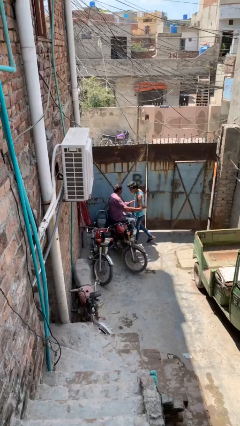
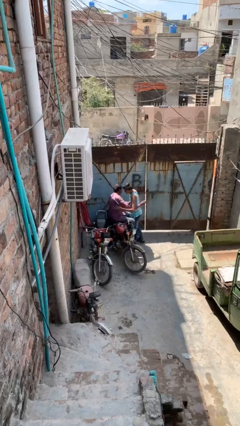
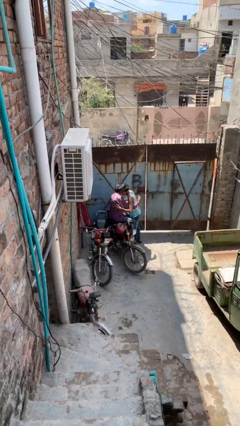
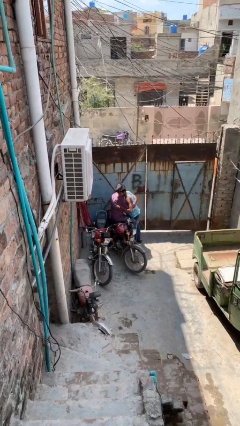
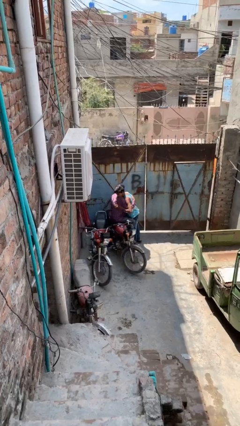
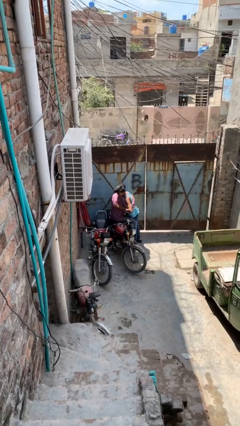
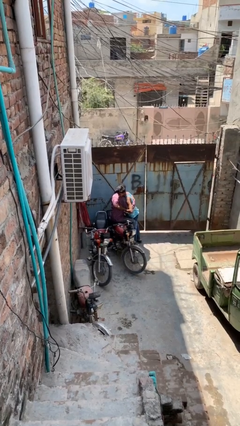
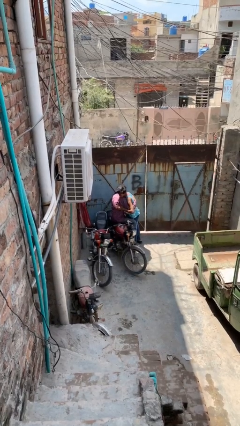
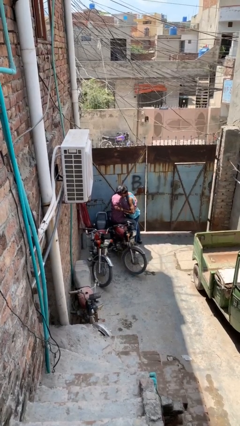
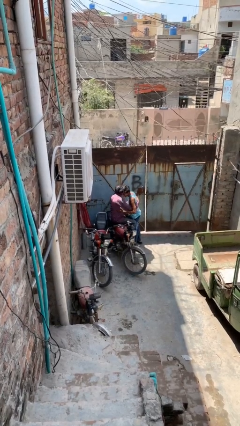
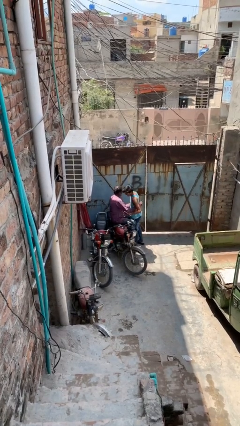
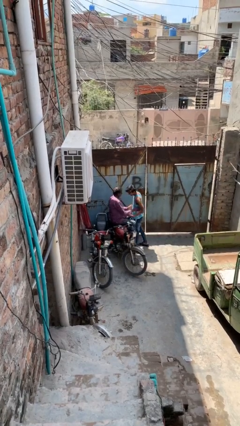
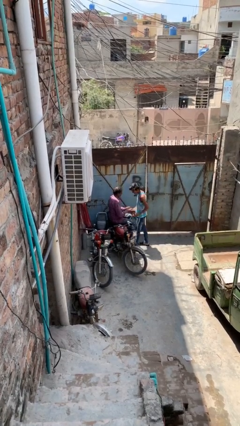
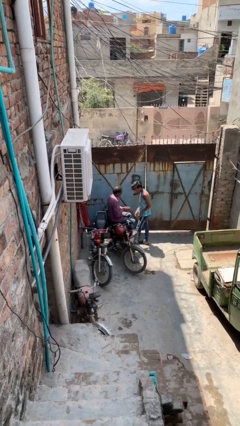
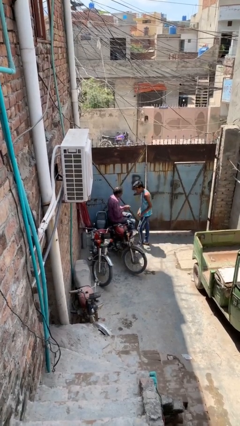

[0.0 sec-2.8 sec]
person embraces person

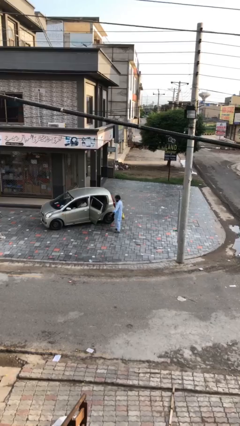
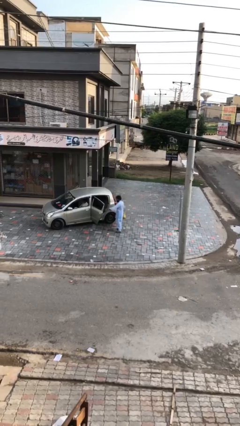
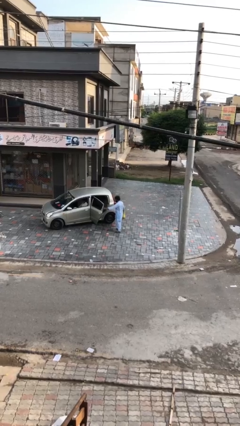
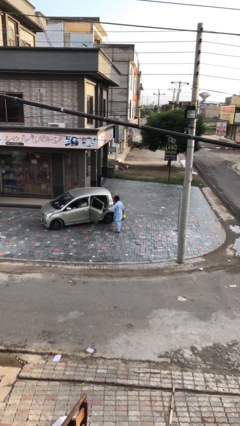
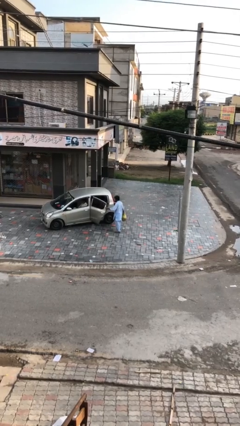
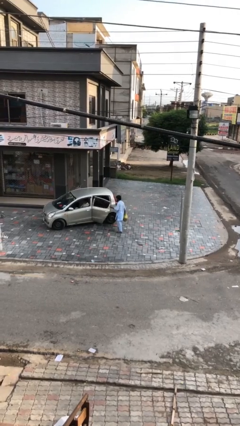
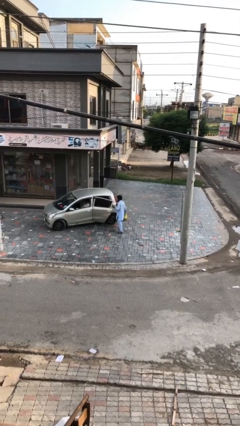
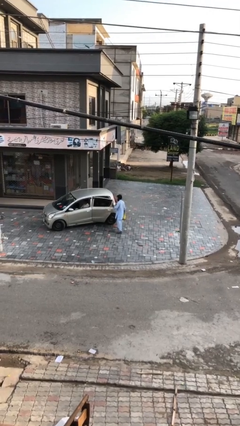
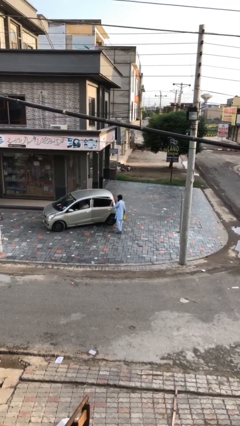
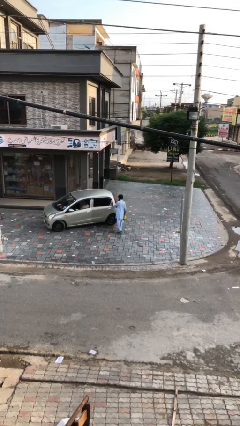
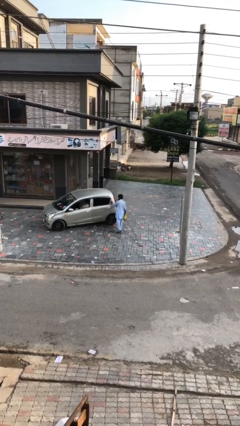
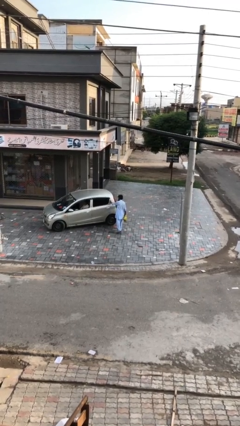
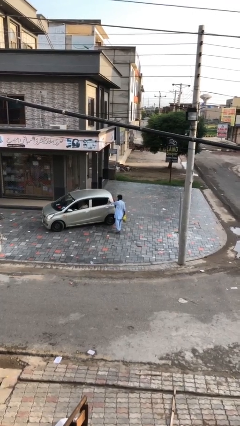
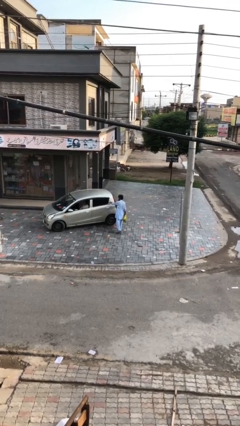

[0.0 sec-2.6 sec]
person closes car door

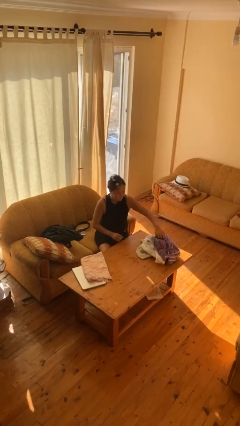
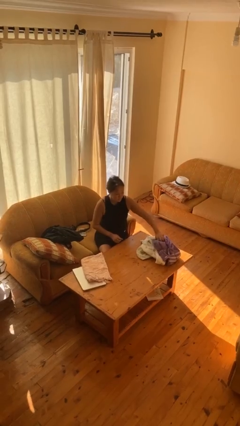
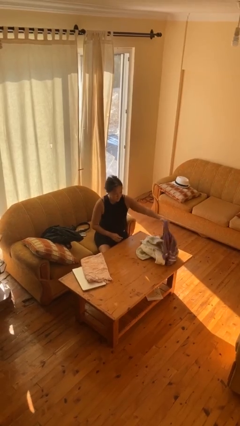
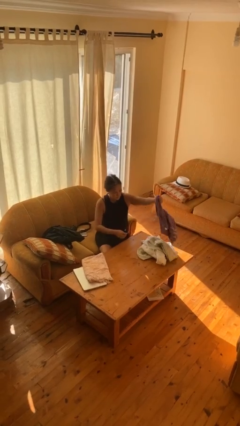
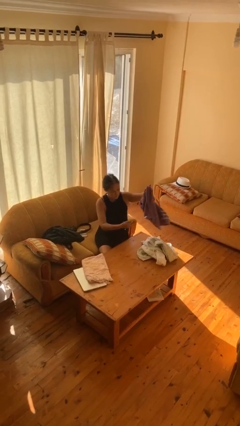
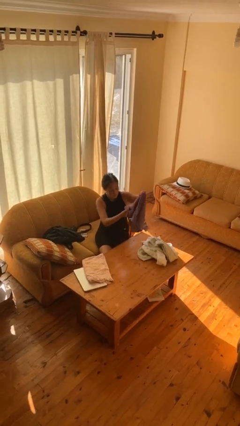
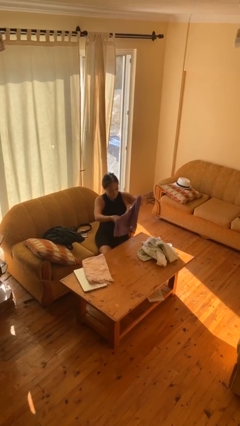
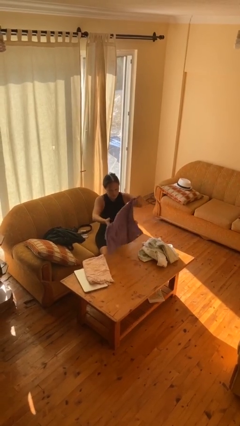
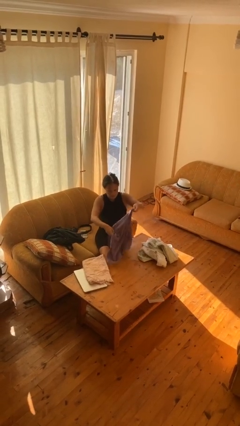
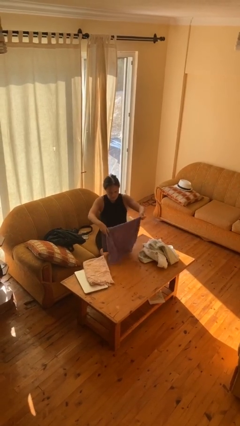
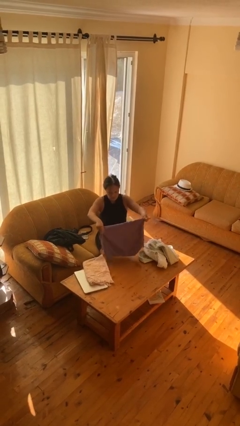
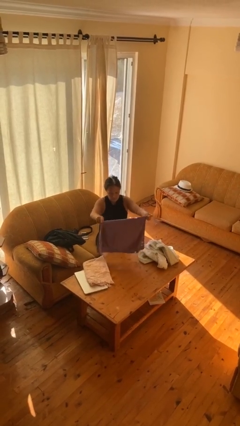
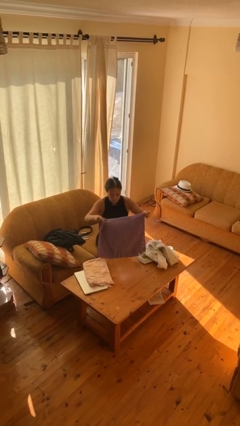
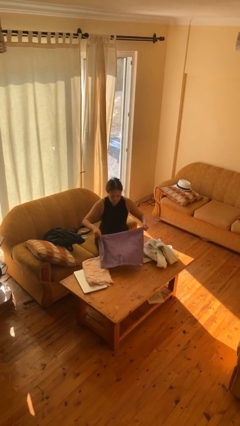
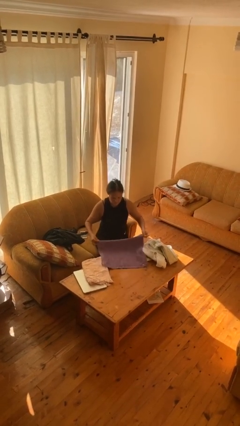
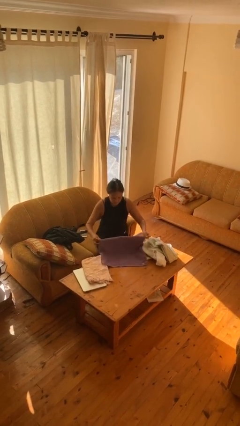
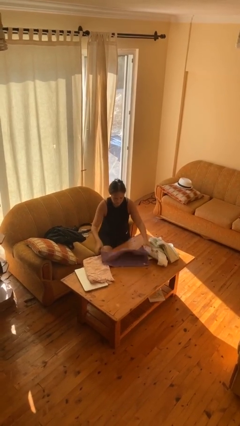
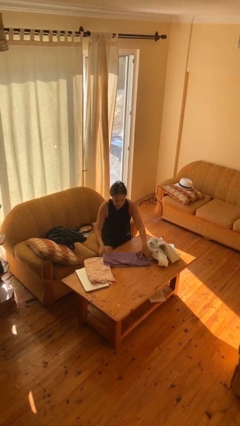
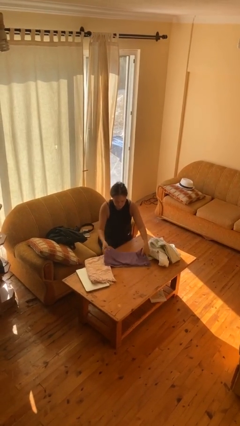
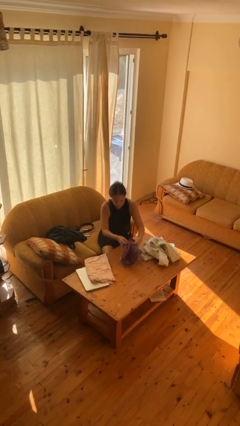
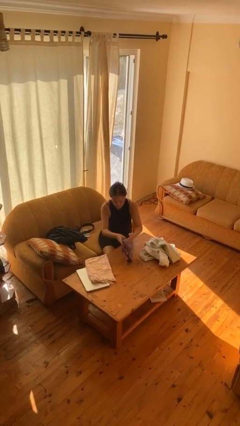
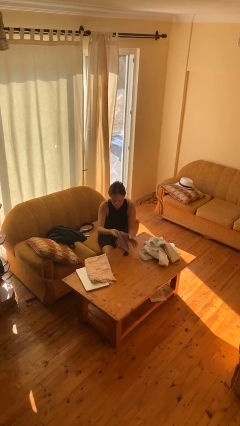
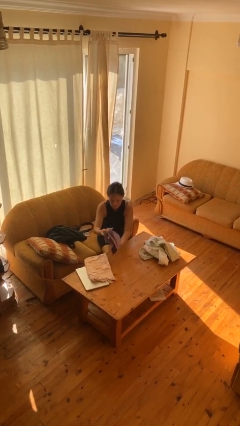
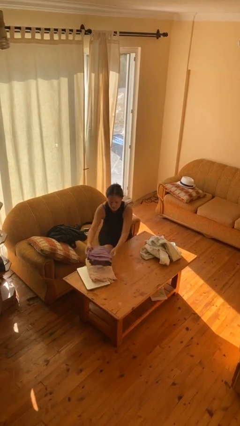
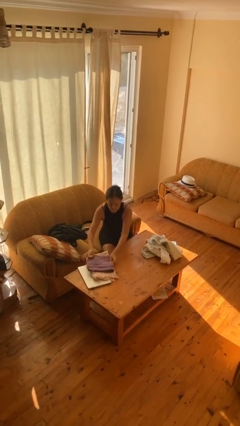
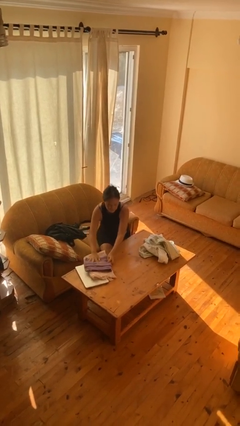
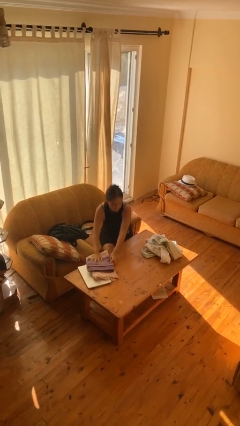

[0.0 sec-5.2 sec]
person folds towel

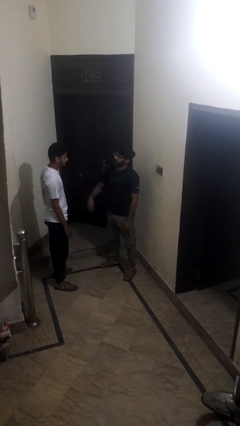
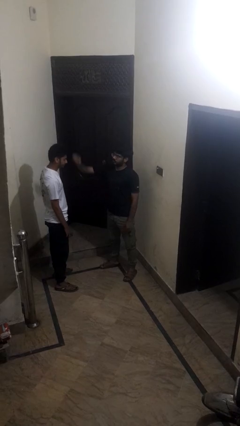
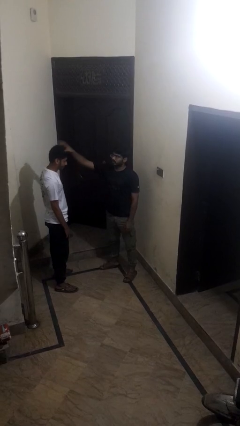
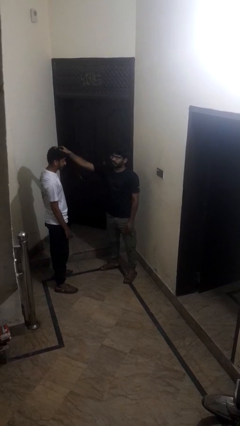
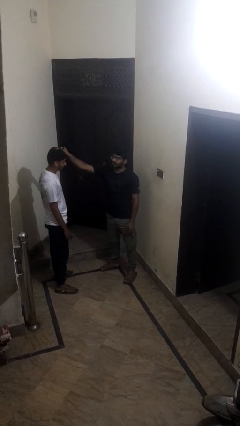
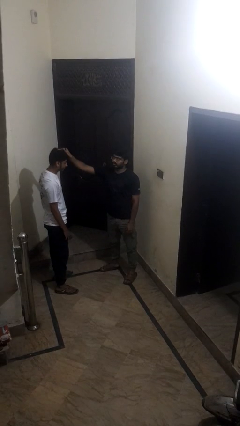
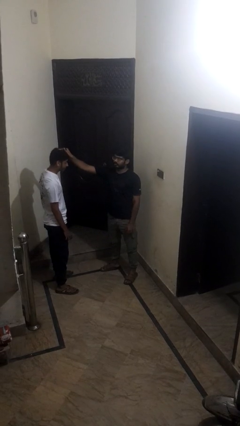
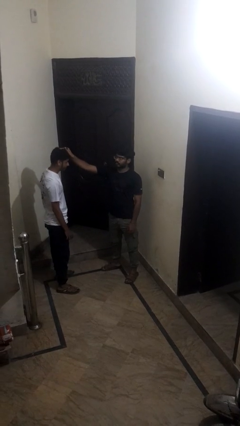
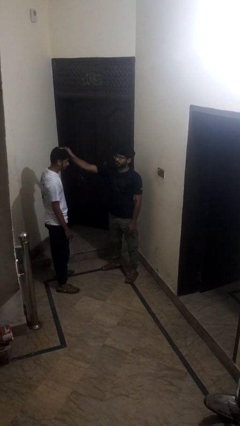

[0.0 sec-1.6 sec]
person grabs person by hair

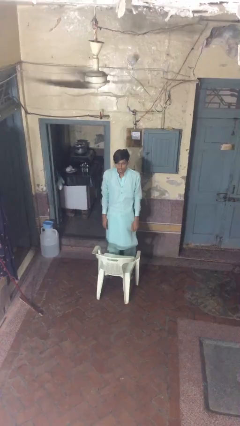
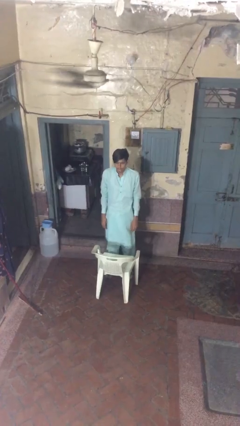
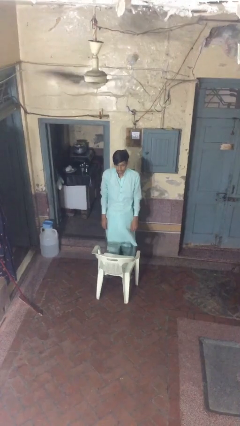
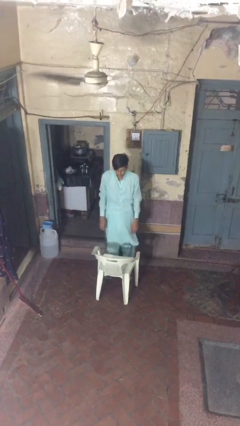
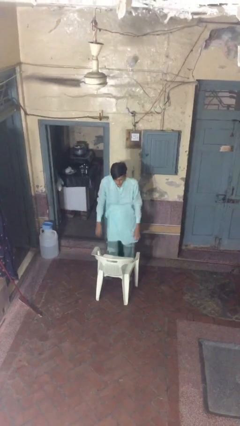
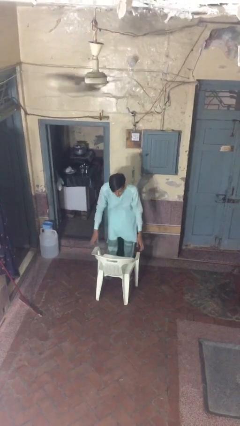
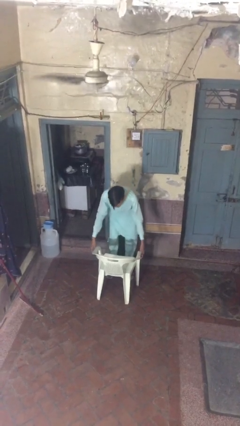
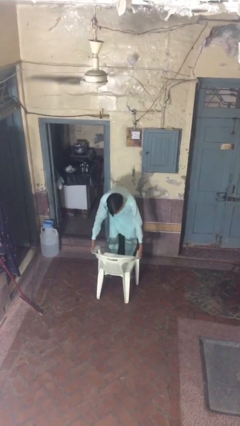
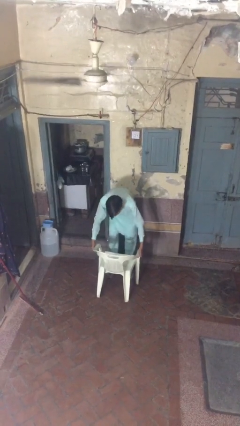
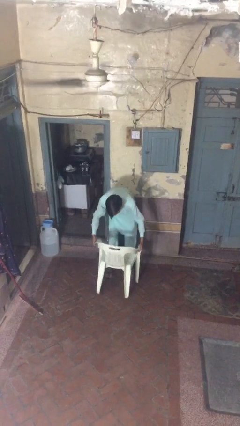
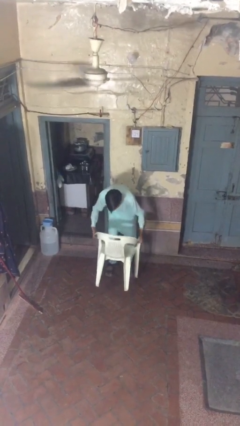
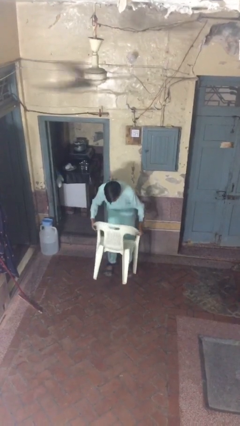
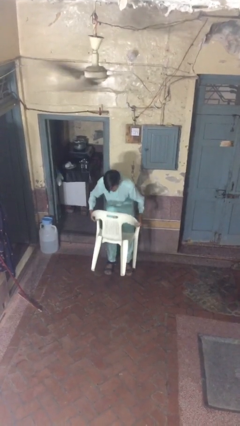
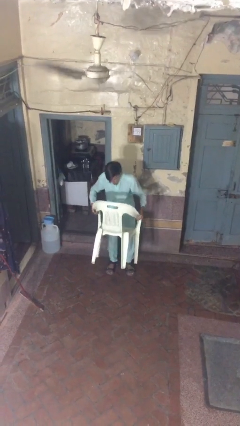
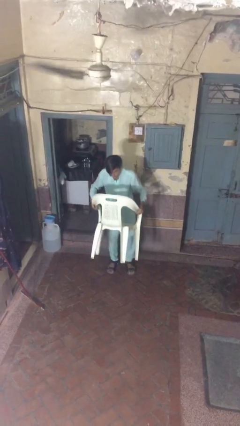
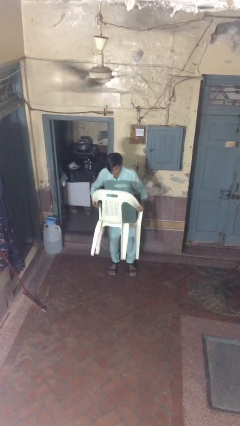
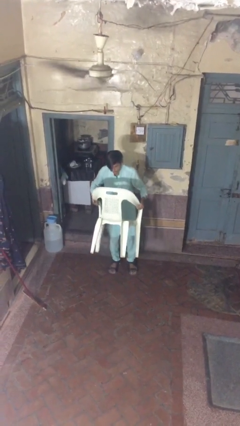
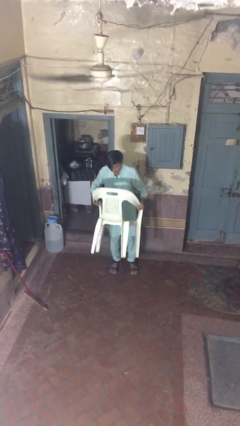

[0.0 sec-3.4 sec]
person picks up object from floor

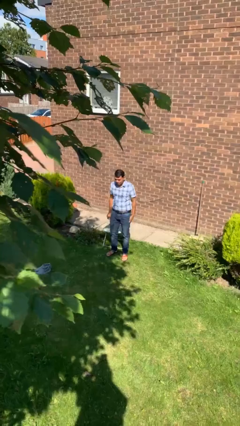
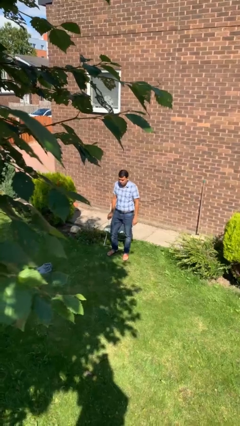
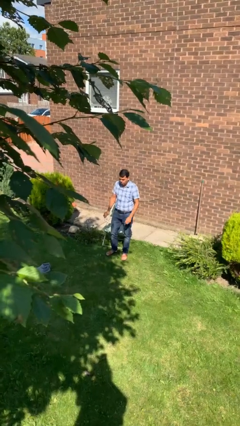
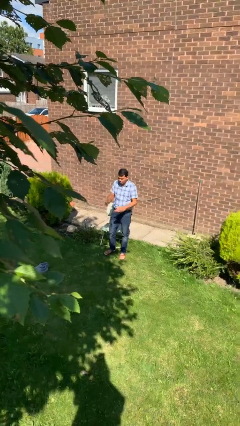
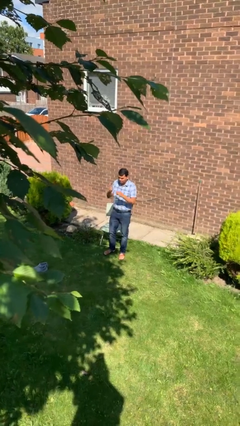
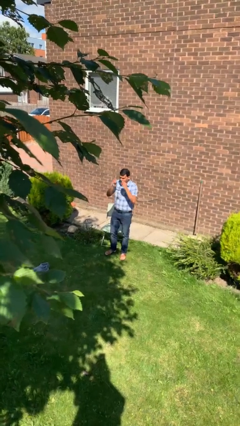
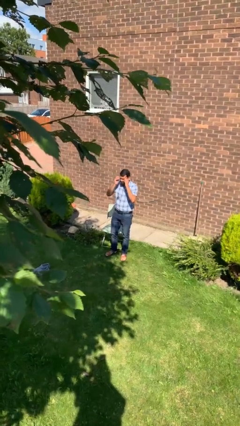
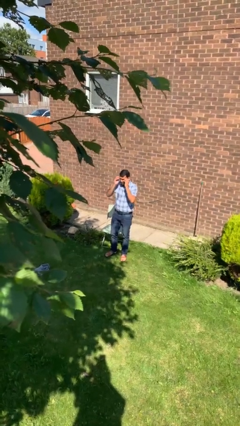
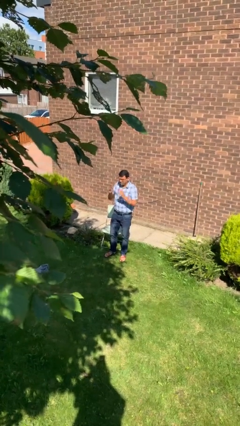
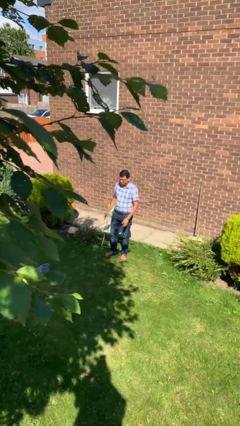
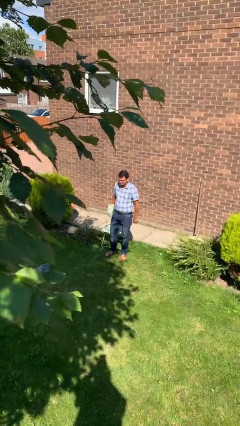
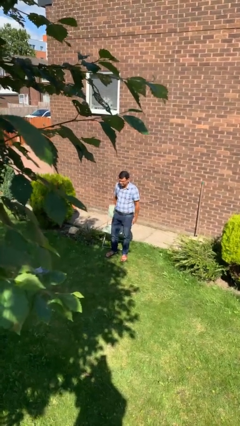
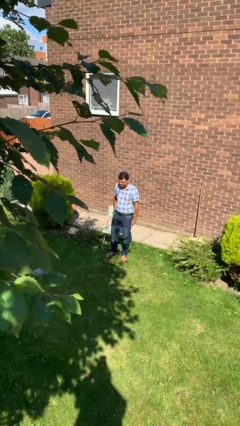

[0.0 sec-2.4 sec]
person puts on glasses
